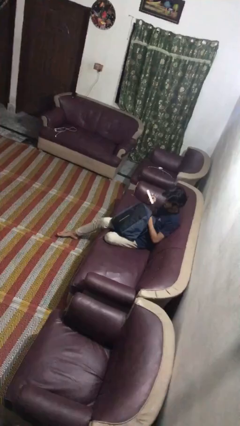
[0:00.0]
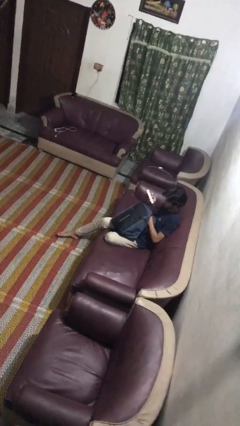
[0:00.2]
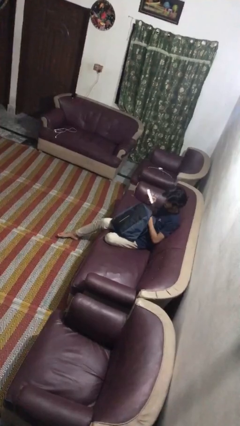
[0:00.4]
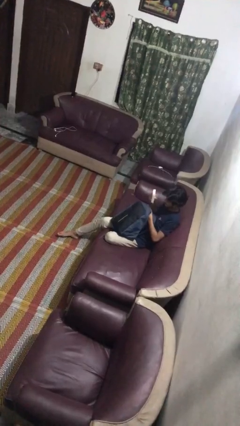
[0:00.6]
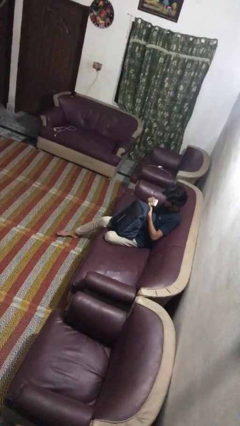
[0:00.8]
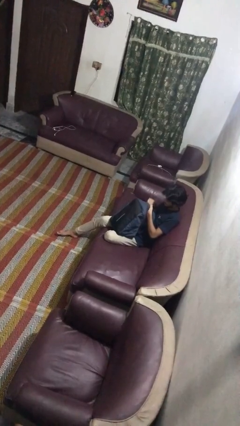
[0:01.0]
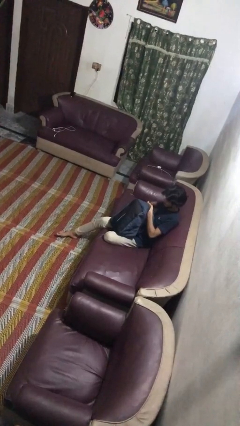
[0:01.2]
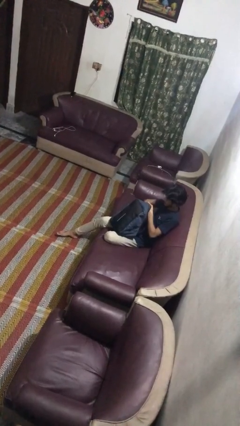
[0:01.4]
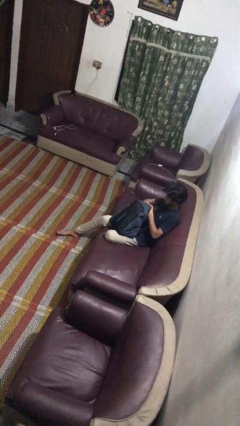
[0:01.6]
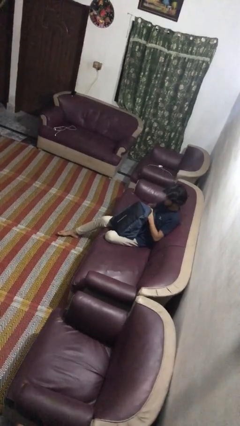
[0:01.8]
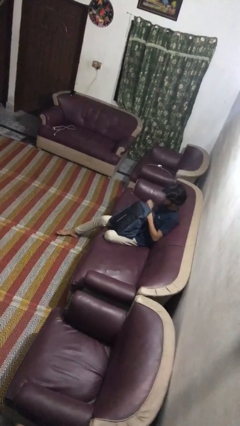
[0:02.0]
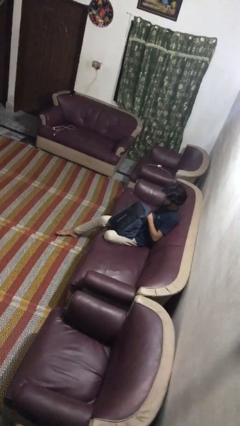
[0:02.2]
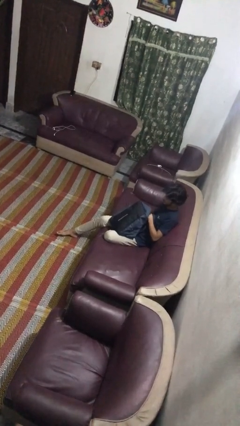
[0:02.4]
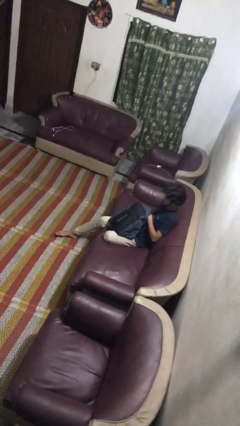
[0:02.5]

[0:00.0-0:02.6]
person puts object into backpack

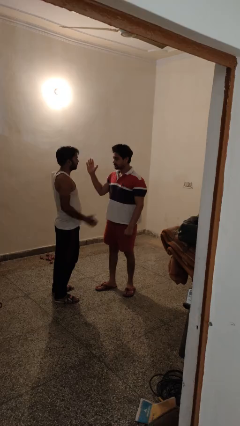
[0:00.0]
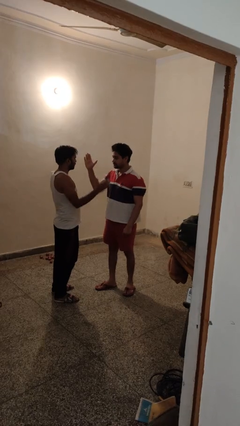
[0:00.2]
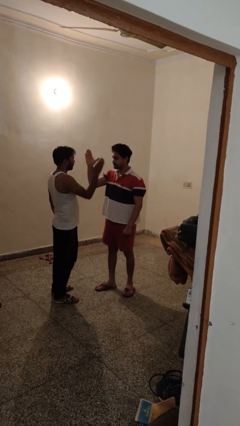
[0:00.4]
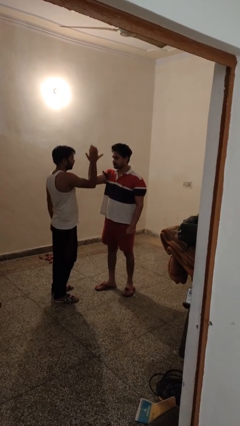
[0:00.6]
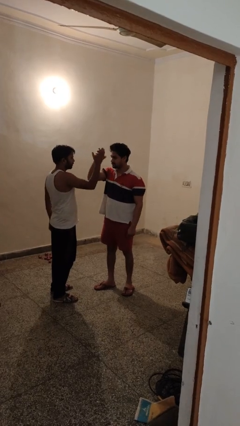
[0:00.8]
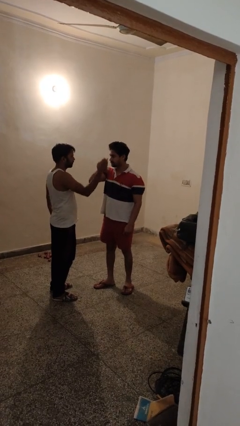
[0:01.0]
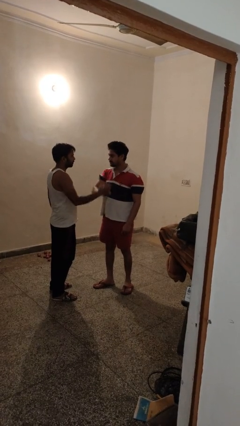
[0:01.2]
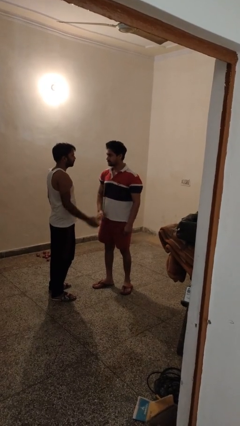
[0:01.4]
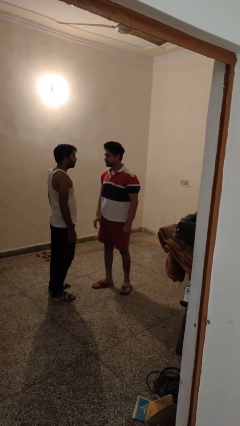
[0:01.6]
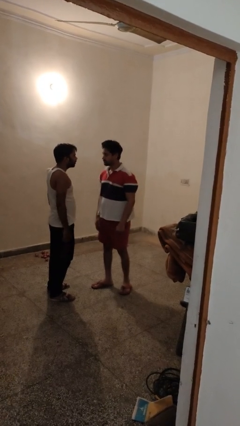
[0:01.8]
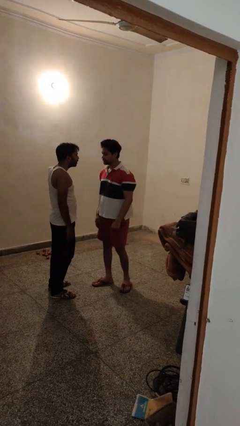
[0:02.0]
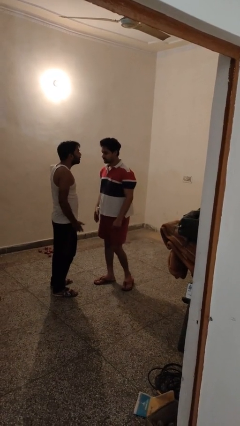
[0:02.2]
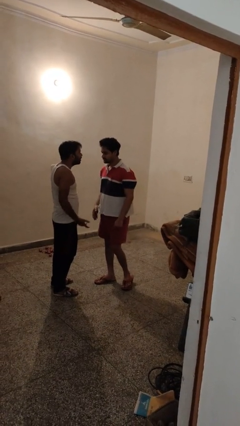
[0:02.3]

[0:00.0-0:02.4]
person highfives hand

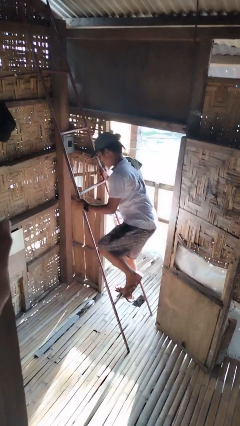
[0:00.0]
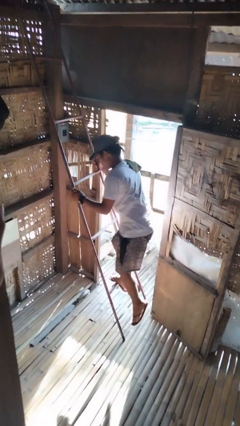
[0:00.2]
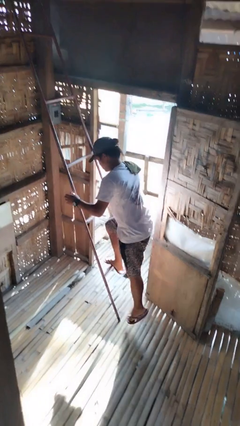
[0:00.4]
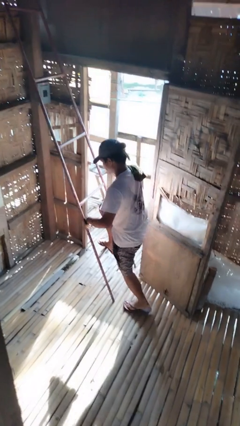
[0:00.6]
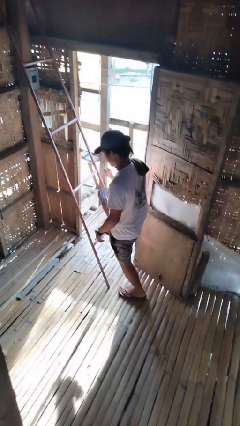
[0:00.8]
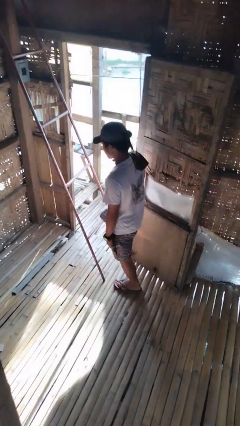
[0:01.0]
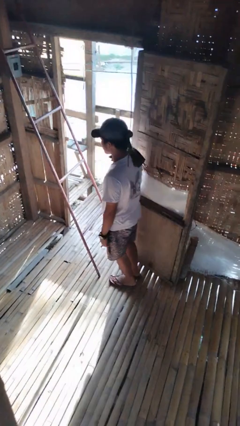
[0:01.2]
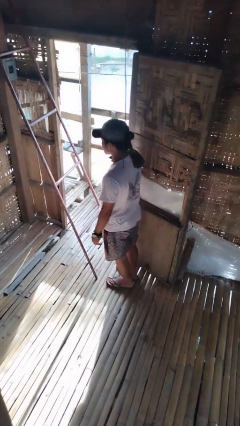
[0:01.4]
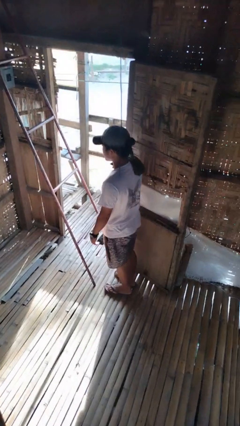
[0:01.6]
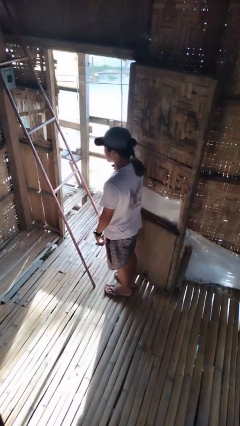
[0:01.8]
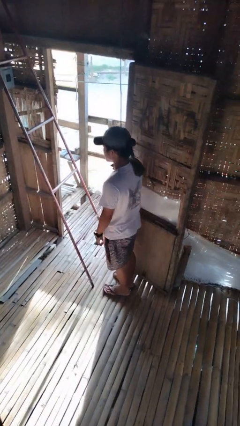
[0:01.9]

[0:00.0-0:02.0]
person climbs down ladder

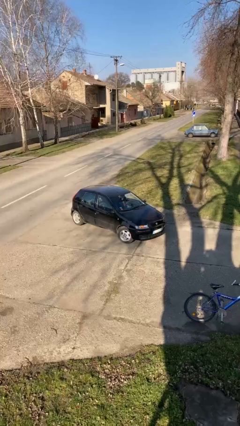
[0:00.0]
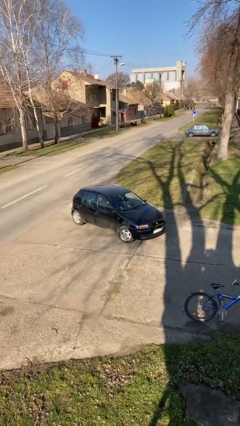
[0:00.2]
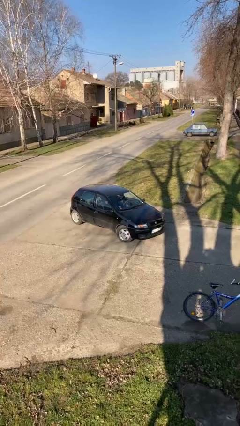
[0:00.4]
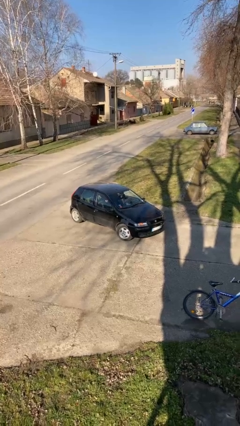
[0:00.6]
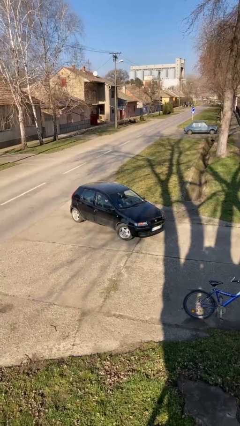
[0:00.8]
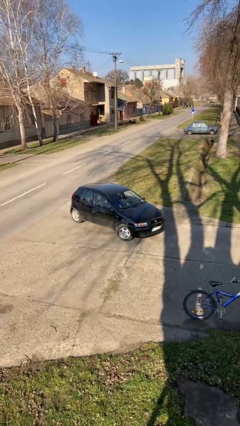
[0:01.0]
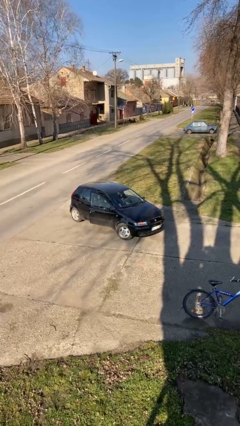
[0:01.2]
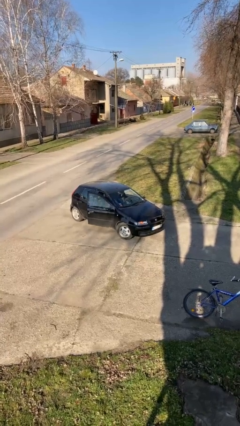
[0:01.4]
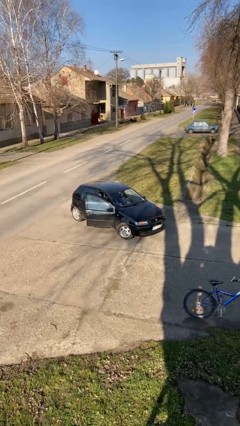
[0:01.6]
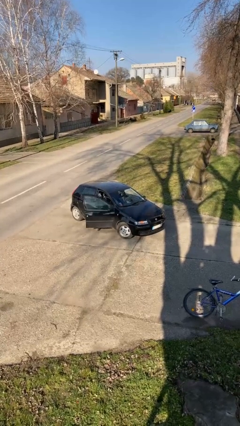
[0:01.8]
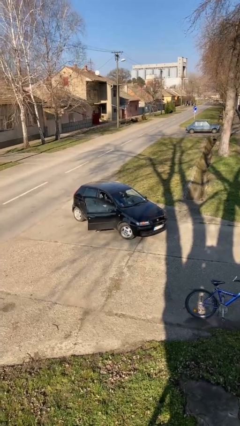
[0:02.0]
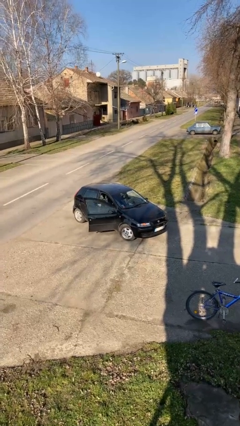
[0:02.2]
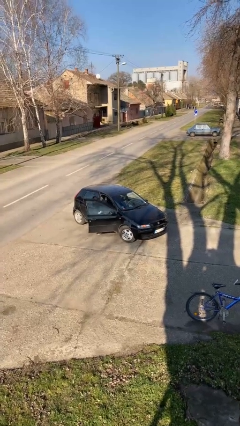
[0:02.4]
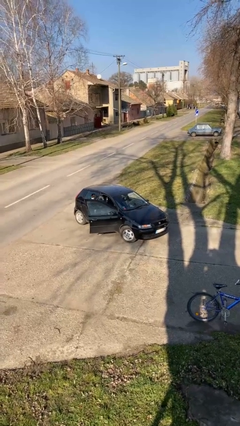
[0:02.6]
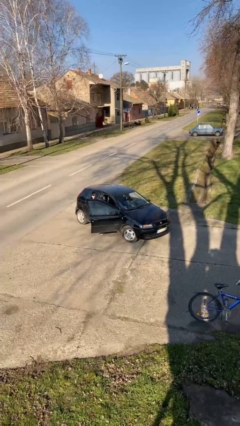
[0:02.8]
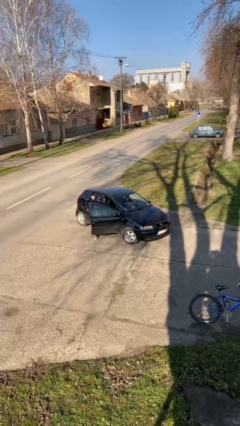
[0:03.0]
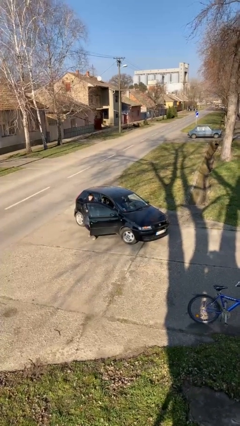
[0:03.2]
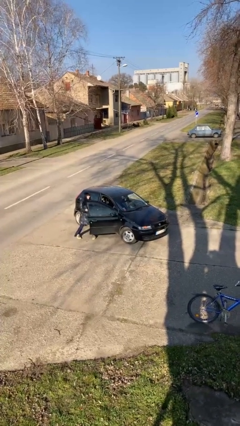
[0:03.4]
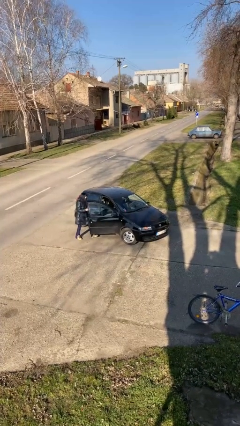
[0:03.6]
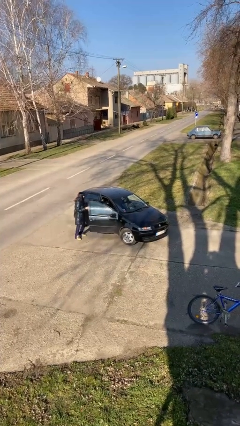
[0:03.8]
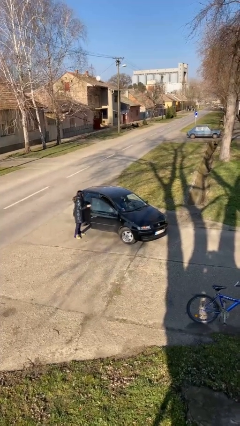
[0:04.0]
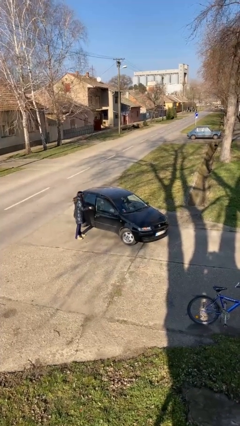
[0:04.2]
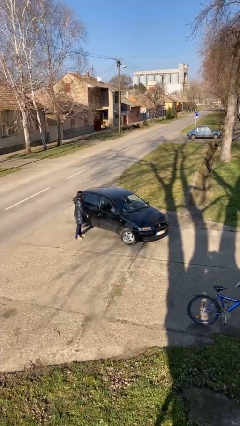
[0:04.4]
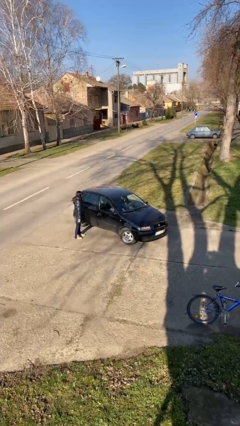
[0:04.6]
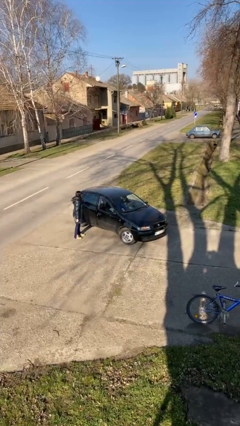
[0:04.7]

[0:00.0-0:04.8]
car drops off person

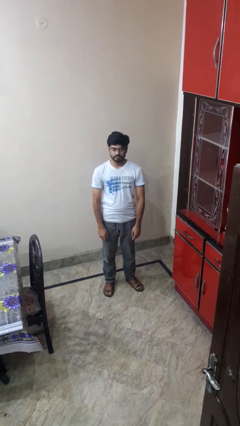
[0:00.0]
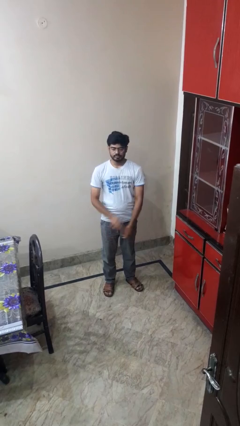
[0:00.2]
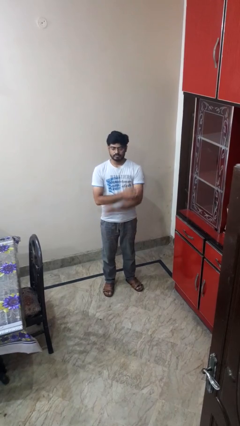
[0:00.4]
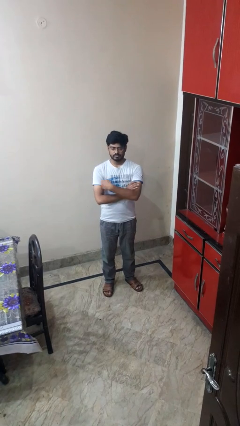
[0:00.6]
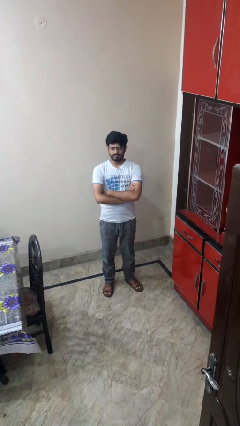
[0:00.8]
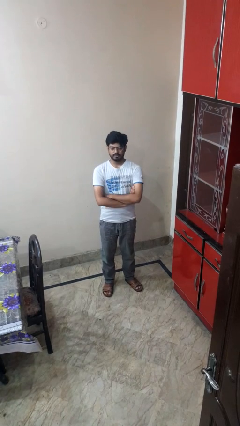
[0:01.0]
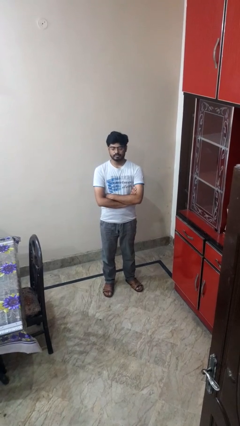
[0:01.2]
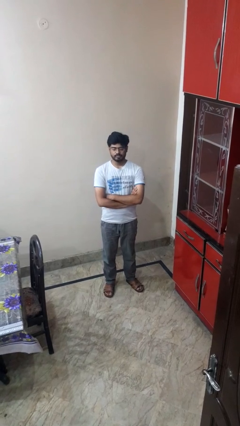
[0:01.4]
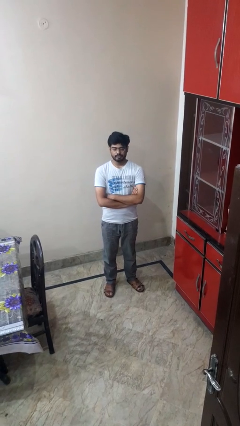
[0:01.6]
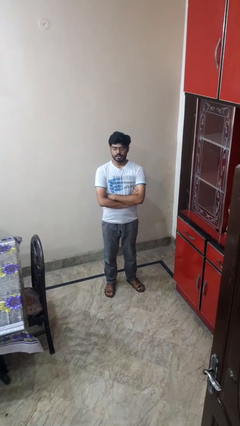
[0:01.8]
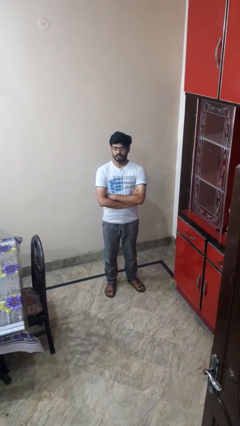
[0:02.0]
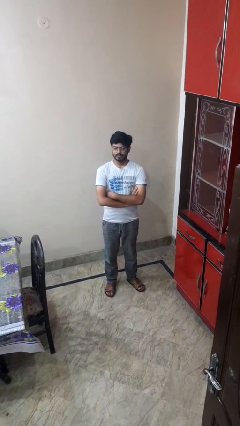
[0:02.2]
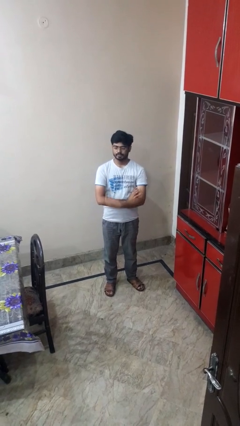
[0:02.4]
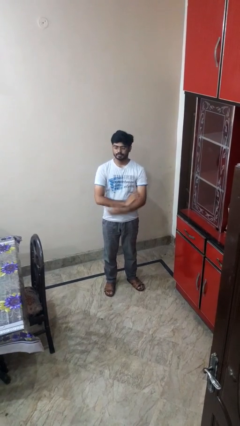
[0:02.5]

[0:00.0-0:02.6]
person crosses arms

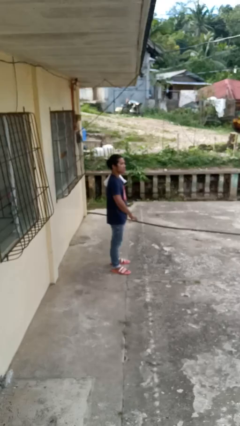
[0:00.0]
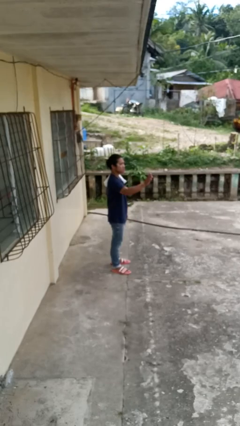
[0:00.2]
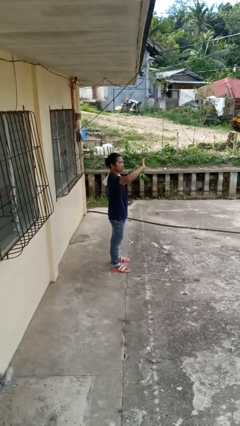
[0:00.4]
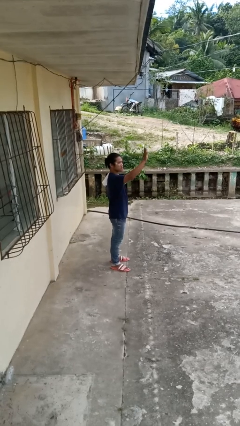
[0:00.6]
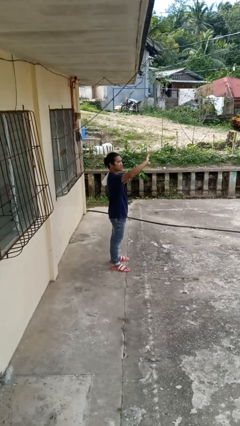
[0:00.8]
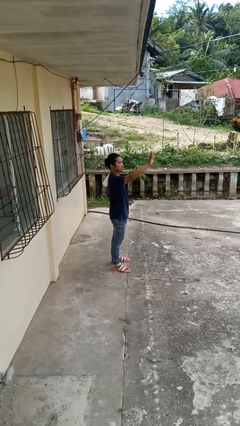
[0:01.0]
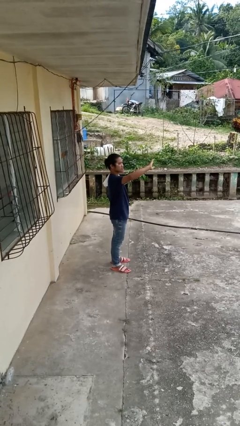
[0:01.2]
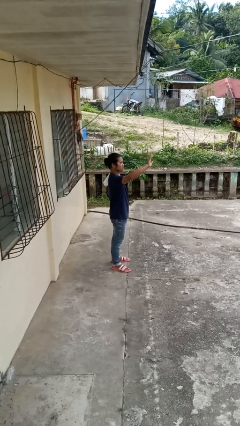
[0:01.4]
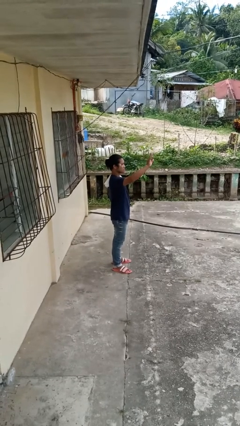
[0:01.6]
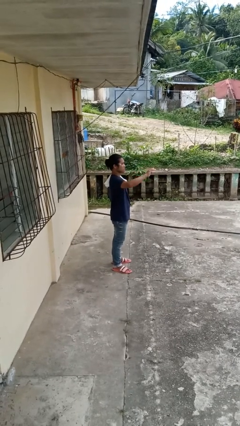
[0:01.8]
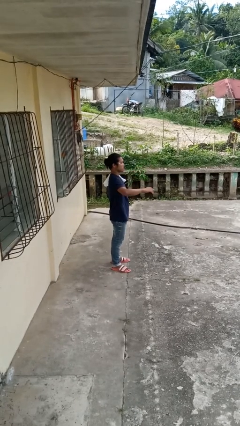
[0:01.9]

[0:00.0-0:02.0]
person waves at person

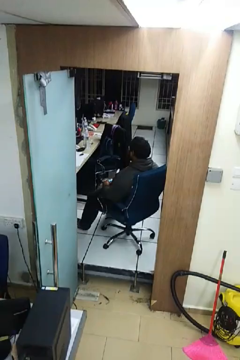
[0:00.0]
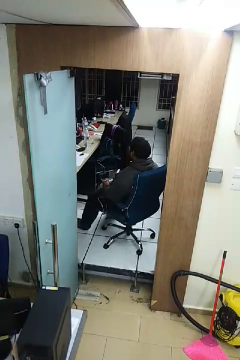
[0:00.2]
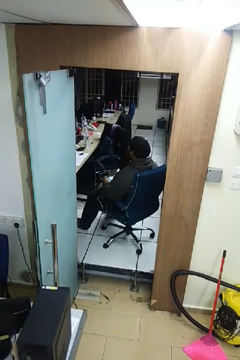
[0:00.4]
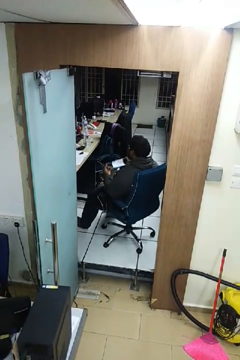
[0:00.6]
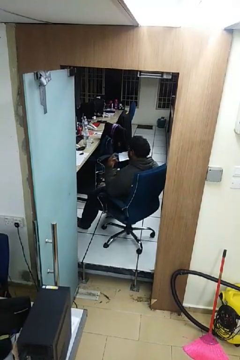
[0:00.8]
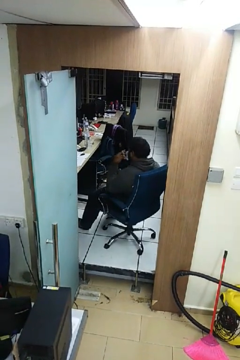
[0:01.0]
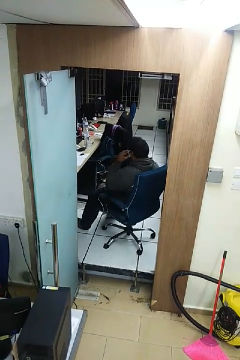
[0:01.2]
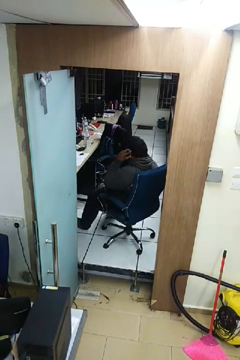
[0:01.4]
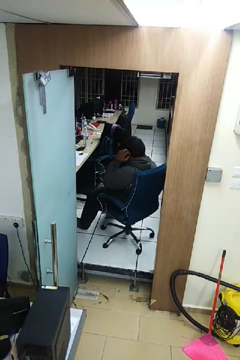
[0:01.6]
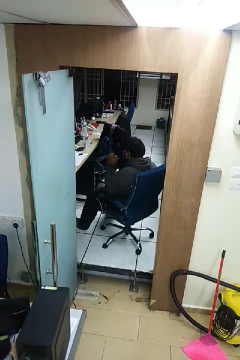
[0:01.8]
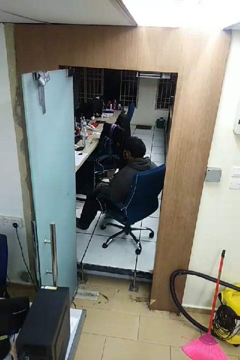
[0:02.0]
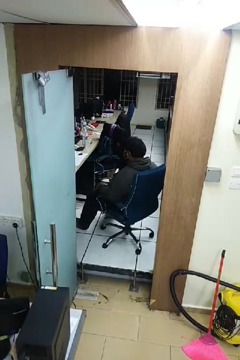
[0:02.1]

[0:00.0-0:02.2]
person puts on facemask
